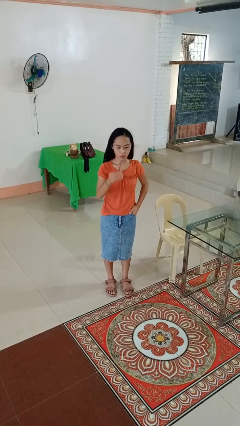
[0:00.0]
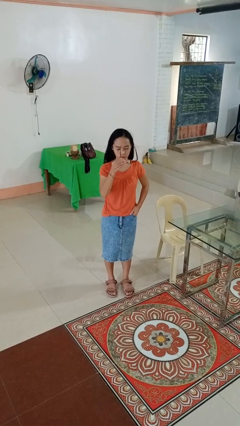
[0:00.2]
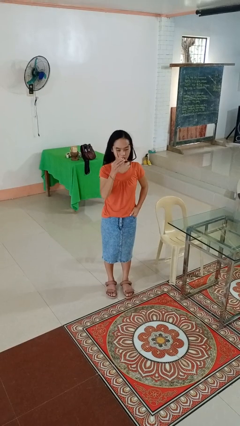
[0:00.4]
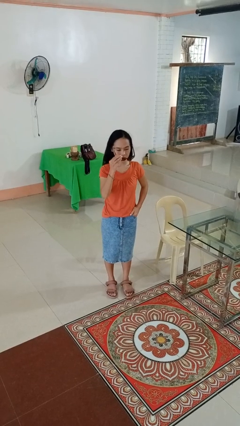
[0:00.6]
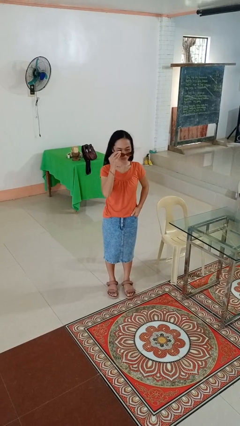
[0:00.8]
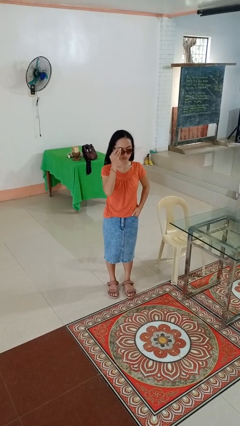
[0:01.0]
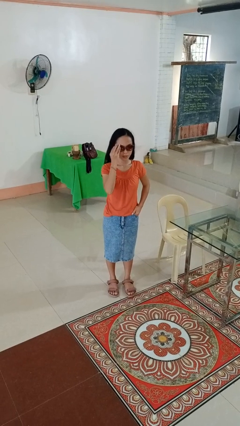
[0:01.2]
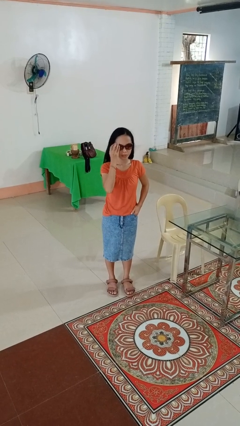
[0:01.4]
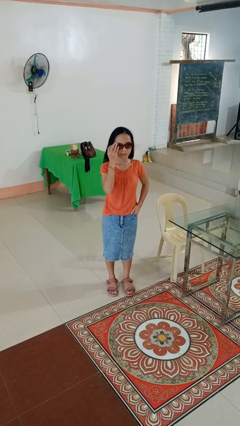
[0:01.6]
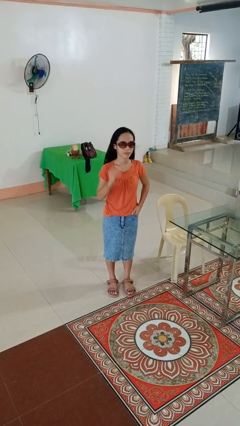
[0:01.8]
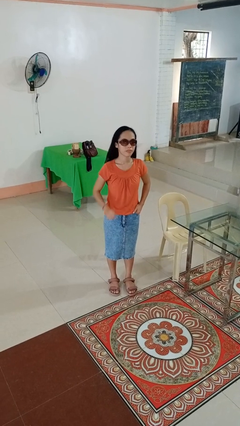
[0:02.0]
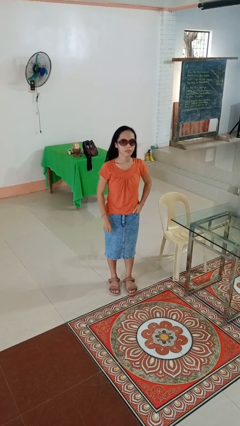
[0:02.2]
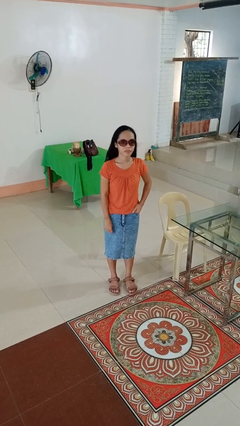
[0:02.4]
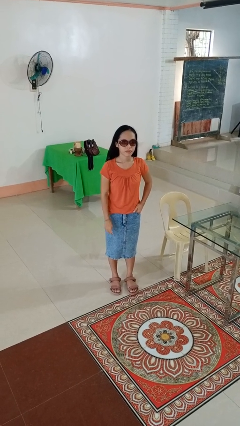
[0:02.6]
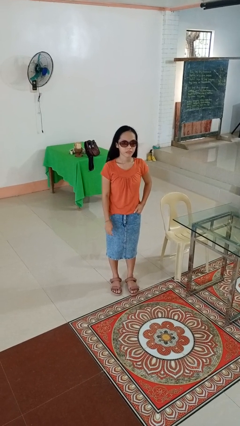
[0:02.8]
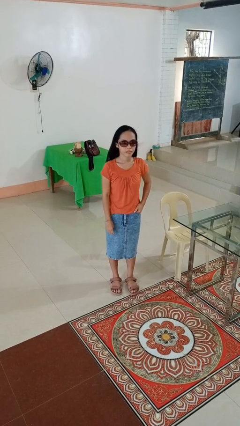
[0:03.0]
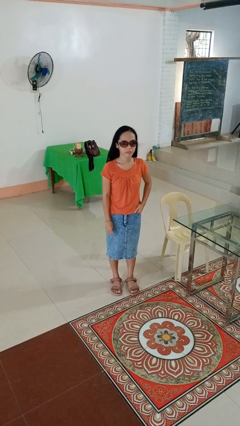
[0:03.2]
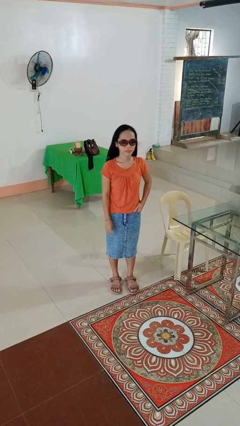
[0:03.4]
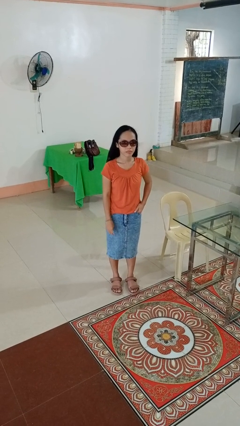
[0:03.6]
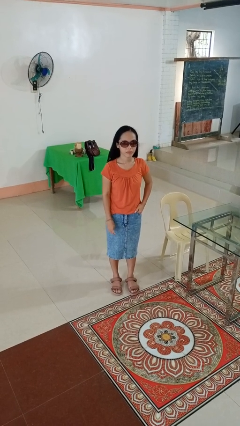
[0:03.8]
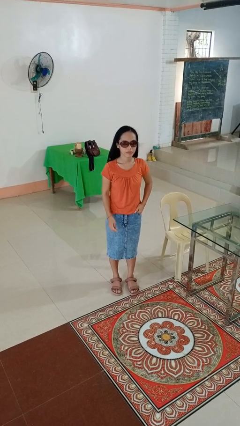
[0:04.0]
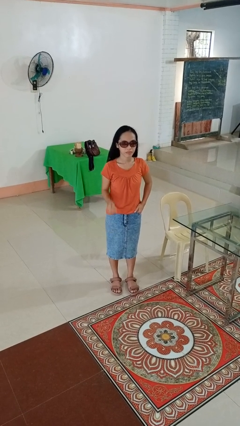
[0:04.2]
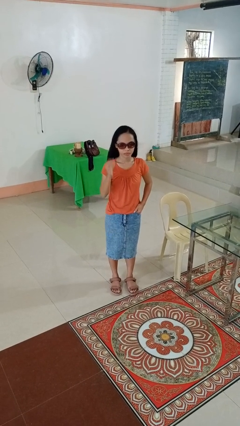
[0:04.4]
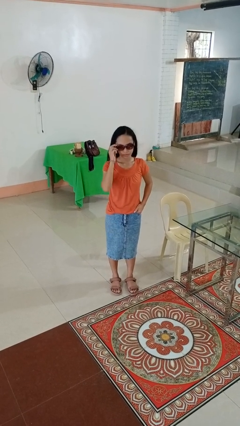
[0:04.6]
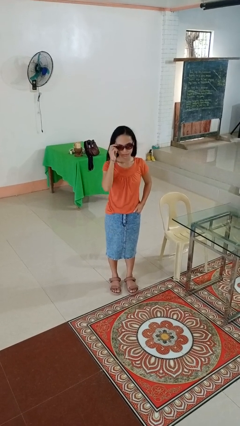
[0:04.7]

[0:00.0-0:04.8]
person puts on sunglasses

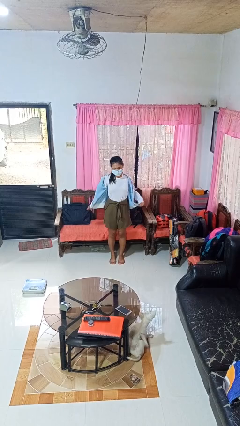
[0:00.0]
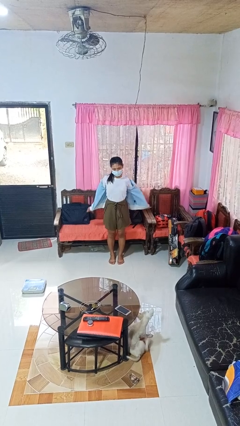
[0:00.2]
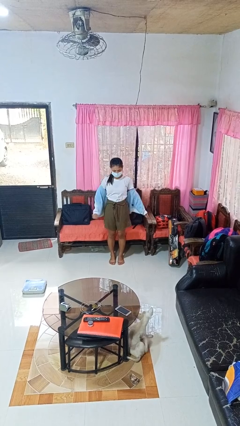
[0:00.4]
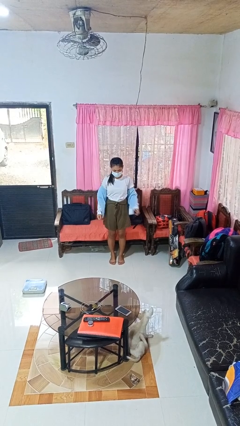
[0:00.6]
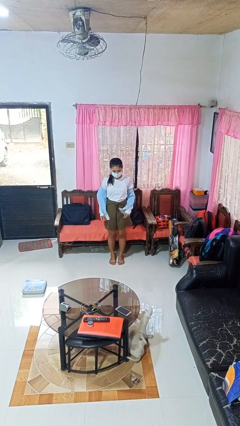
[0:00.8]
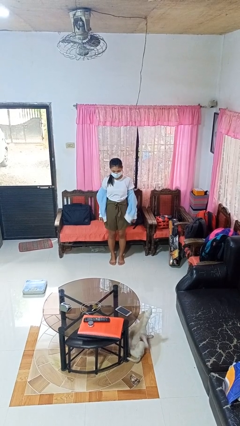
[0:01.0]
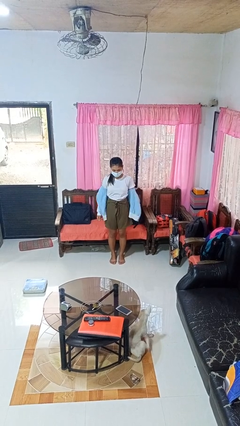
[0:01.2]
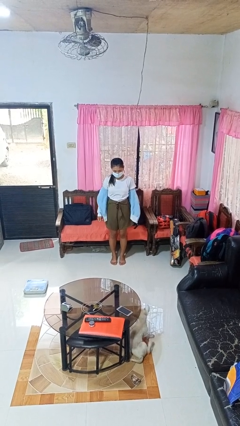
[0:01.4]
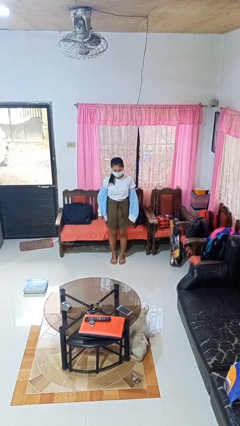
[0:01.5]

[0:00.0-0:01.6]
person takes off jacket

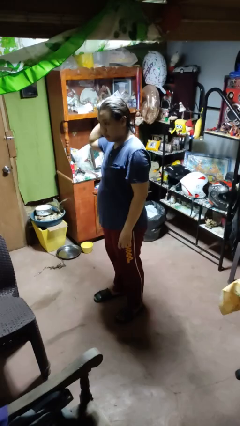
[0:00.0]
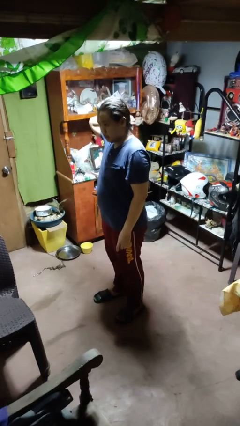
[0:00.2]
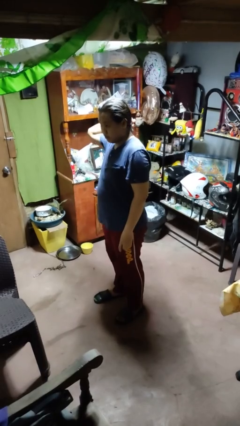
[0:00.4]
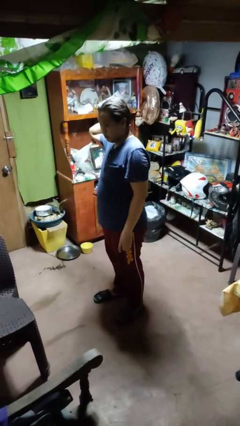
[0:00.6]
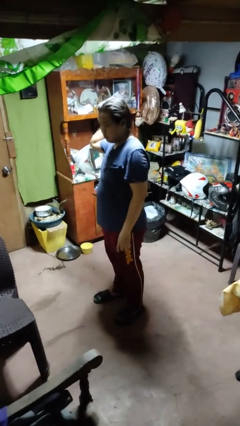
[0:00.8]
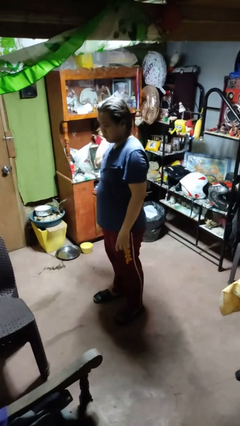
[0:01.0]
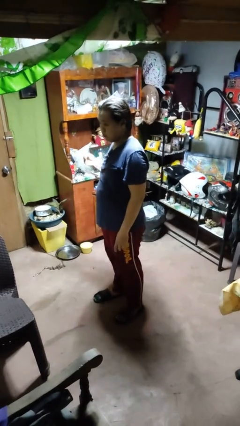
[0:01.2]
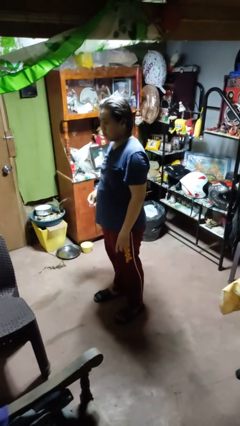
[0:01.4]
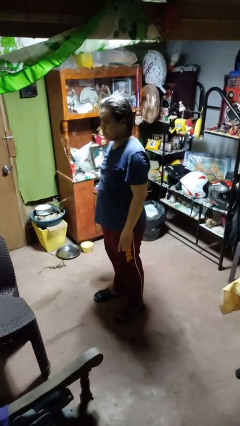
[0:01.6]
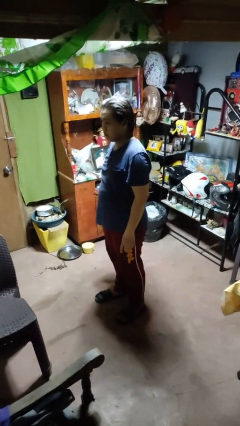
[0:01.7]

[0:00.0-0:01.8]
person takes off hairtie

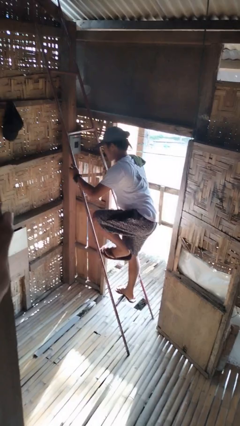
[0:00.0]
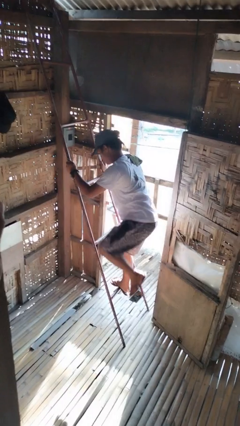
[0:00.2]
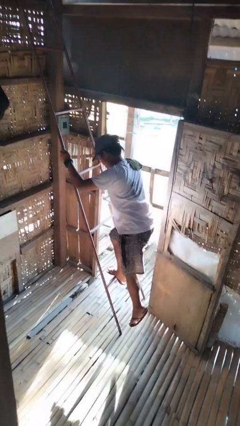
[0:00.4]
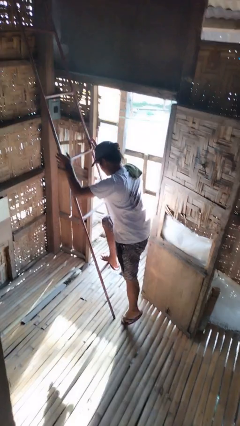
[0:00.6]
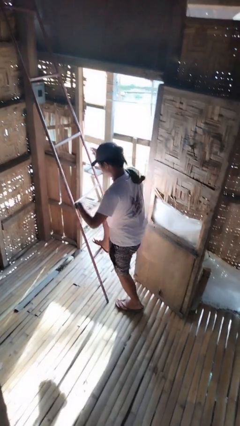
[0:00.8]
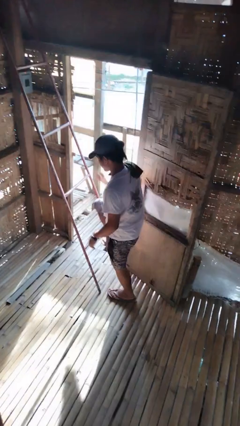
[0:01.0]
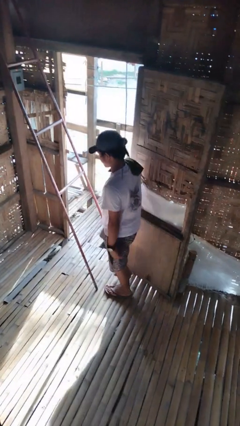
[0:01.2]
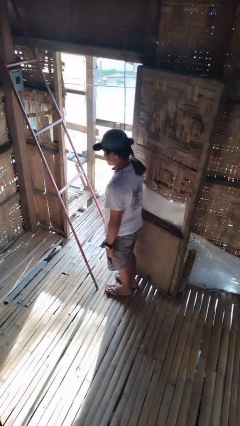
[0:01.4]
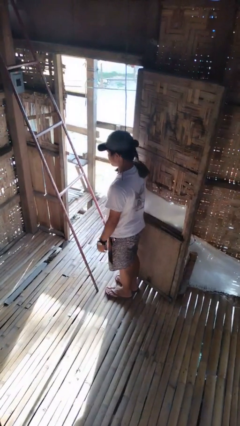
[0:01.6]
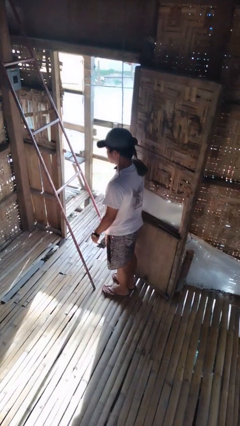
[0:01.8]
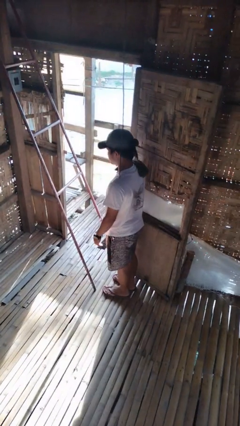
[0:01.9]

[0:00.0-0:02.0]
person climbs down ladder

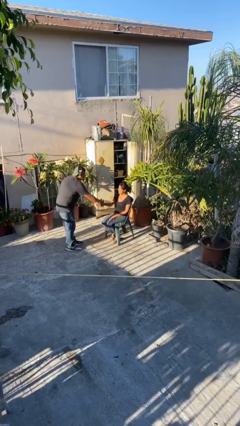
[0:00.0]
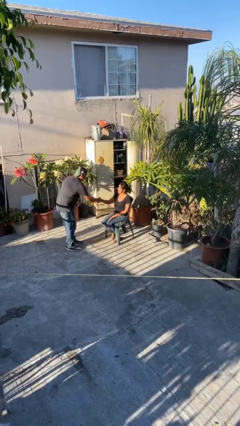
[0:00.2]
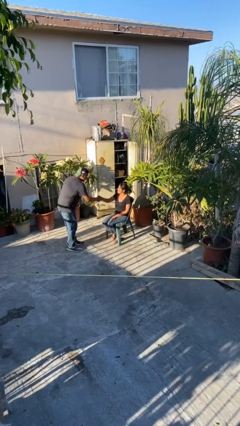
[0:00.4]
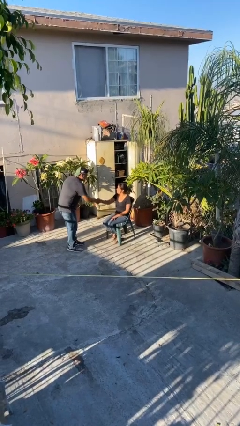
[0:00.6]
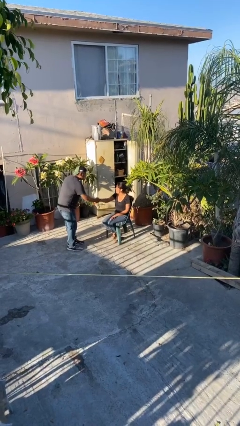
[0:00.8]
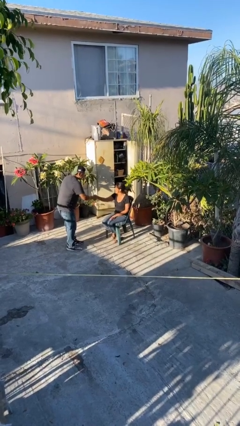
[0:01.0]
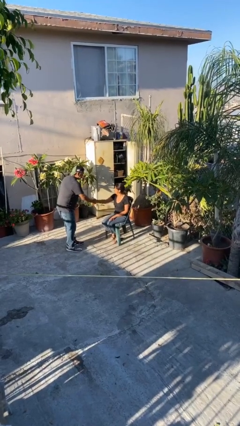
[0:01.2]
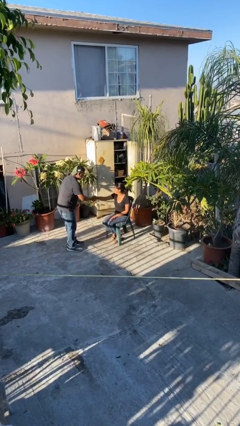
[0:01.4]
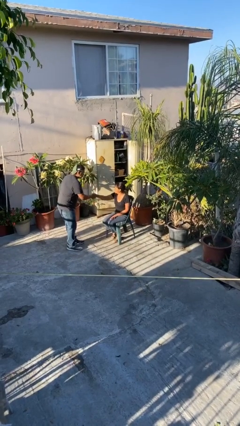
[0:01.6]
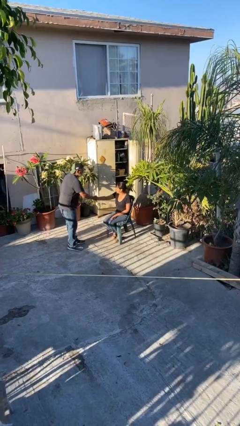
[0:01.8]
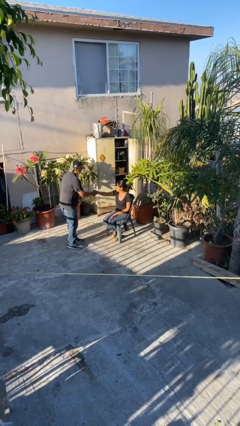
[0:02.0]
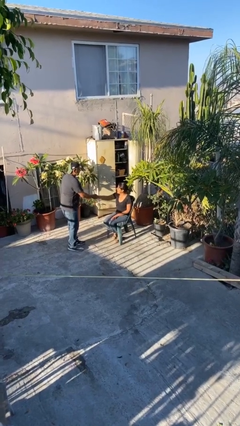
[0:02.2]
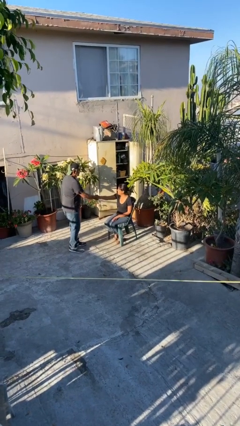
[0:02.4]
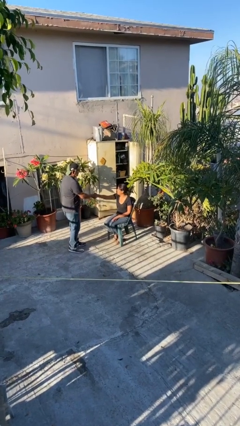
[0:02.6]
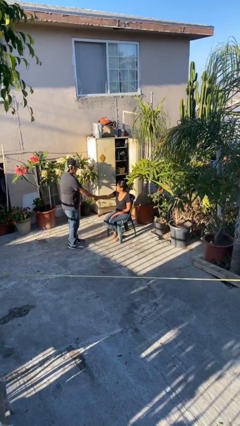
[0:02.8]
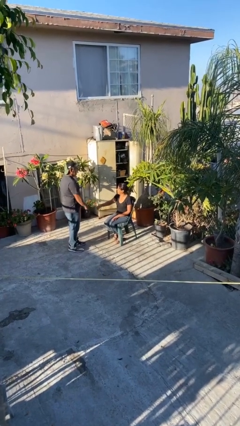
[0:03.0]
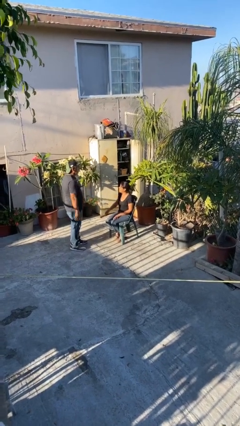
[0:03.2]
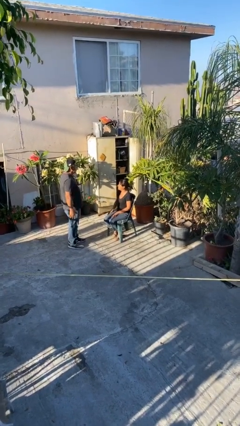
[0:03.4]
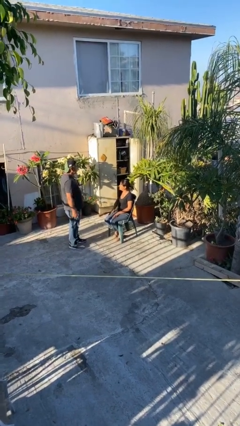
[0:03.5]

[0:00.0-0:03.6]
person shakes hand

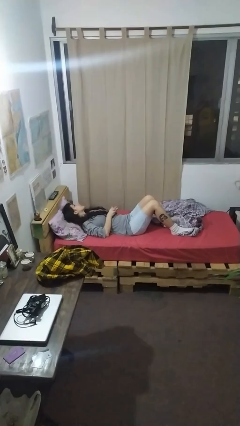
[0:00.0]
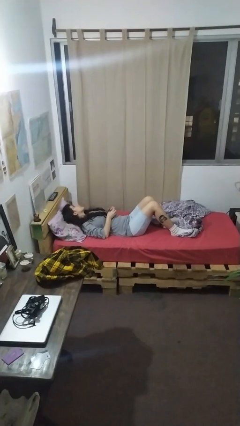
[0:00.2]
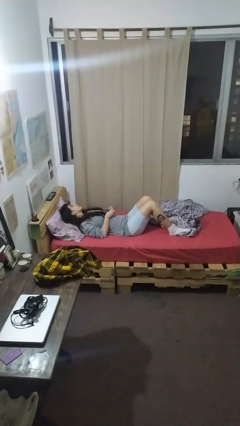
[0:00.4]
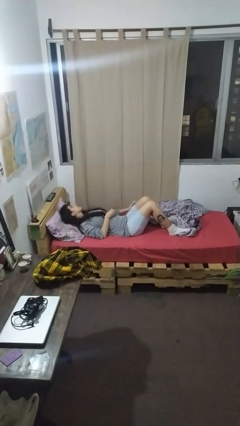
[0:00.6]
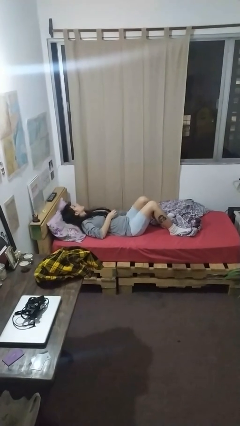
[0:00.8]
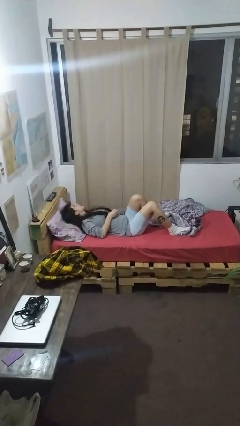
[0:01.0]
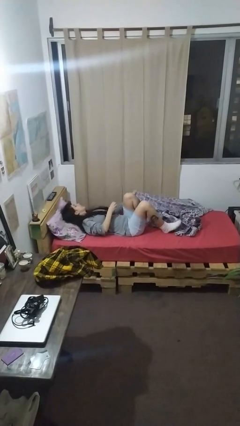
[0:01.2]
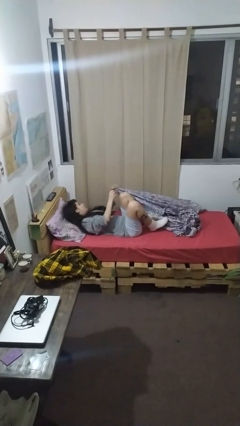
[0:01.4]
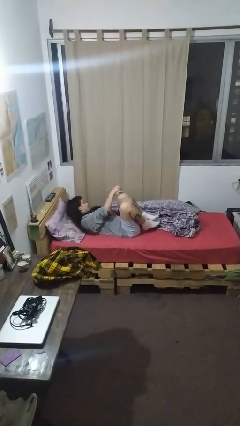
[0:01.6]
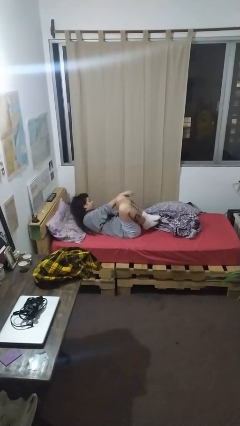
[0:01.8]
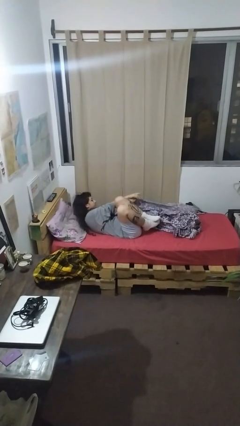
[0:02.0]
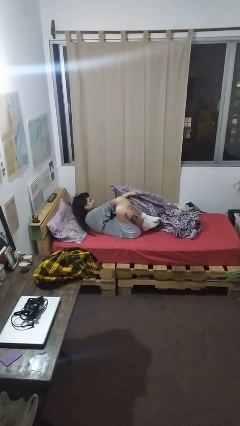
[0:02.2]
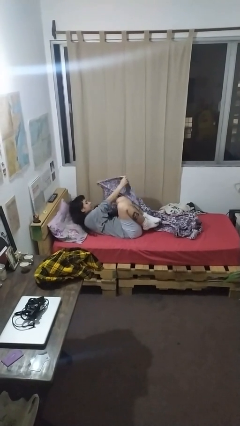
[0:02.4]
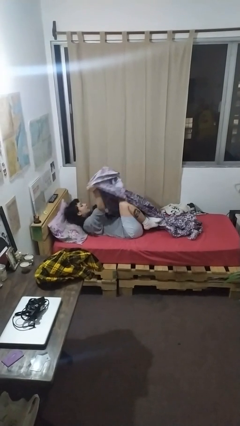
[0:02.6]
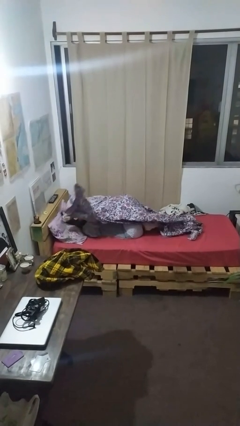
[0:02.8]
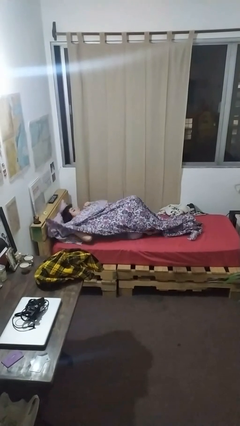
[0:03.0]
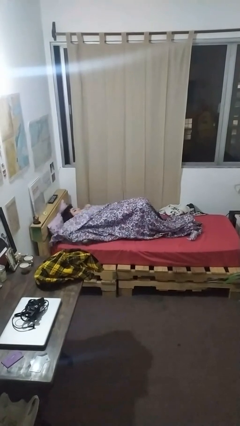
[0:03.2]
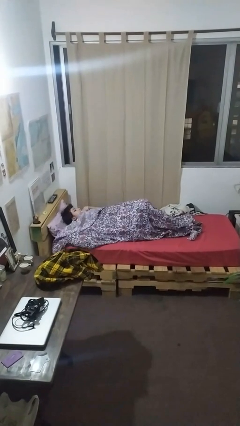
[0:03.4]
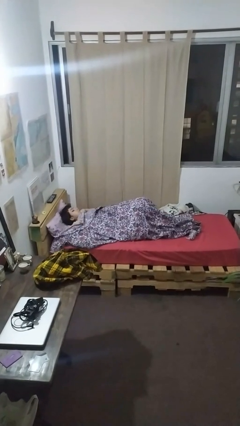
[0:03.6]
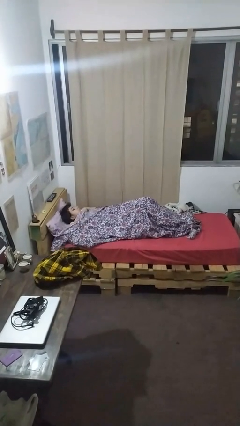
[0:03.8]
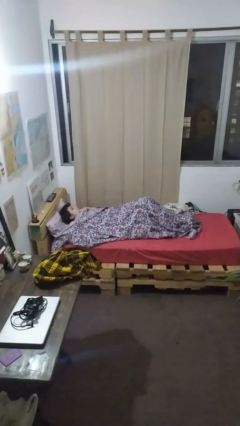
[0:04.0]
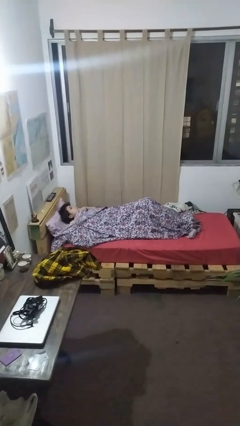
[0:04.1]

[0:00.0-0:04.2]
person covers with bedsheets
